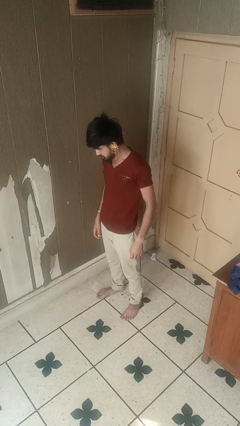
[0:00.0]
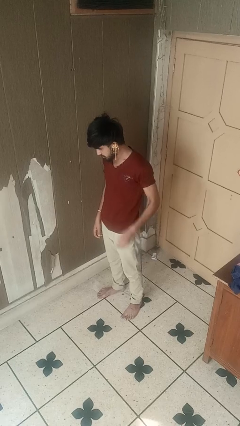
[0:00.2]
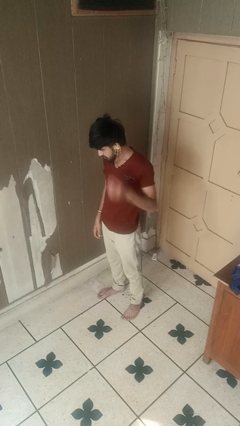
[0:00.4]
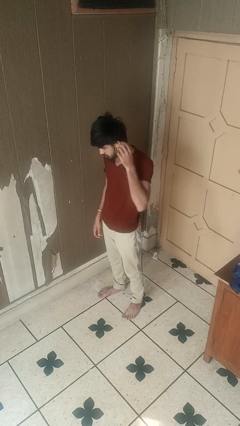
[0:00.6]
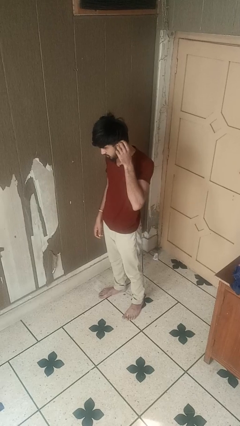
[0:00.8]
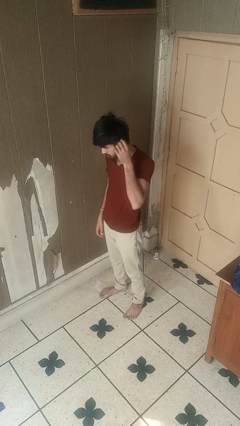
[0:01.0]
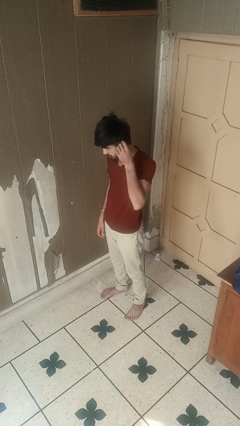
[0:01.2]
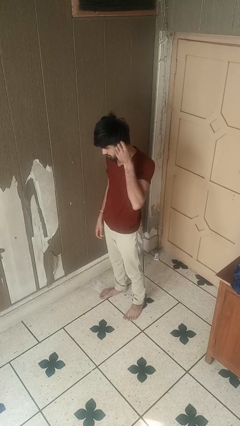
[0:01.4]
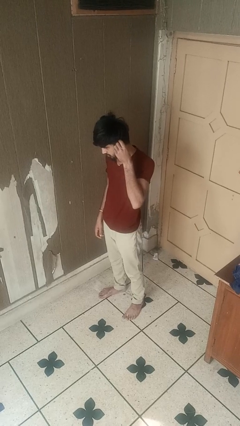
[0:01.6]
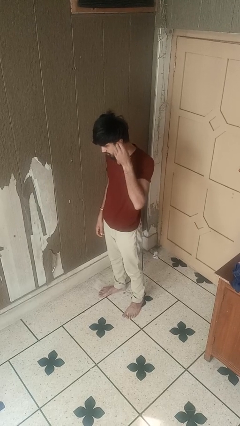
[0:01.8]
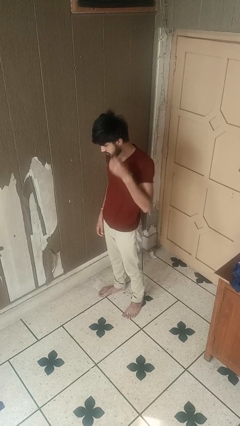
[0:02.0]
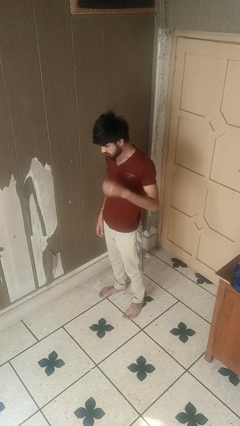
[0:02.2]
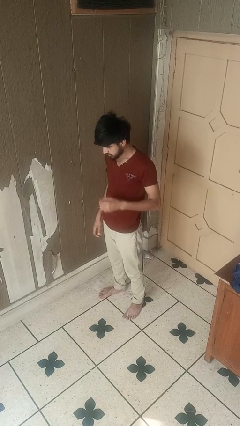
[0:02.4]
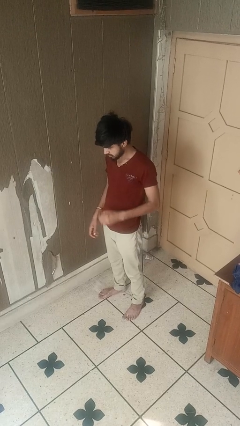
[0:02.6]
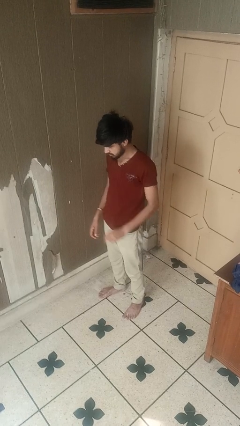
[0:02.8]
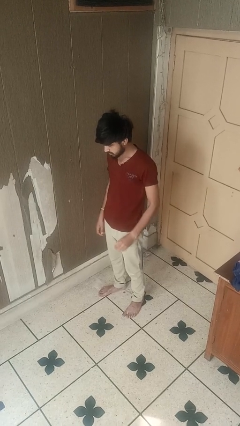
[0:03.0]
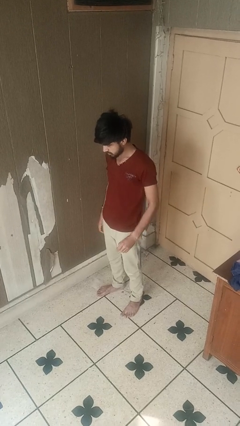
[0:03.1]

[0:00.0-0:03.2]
person takes off earrings

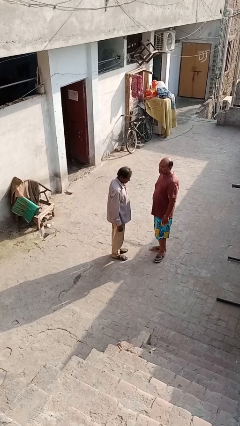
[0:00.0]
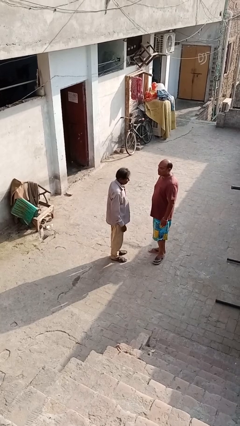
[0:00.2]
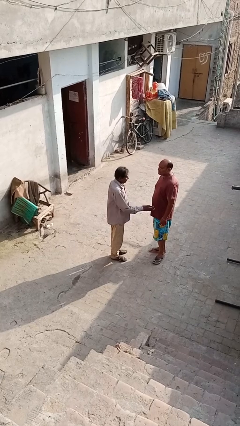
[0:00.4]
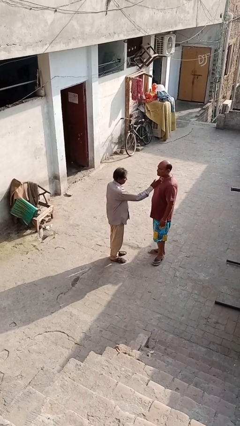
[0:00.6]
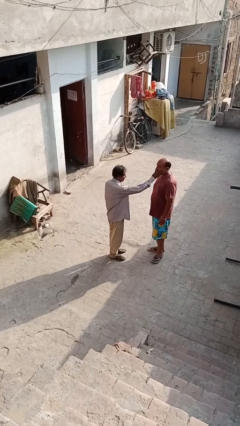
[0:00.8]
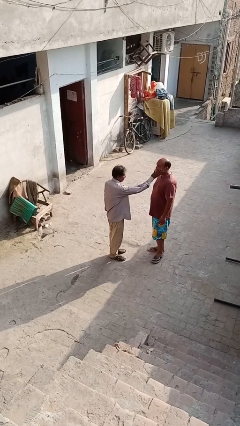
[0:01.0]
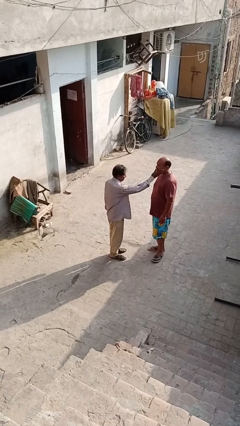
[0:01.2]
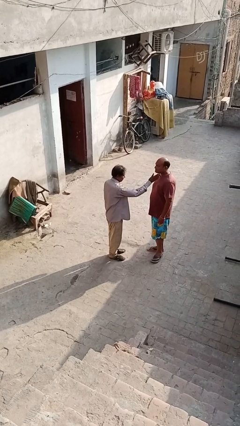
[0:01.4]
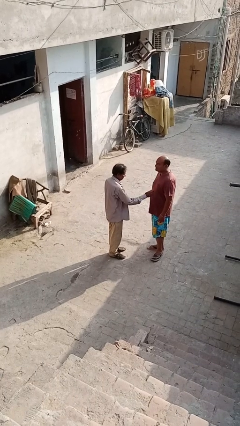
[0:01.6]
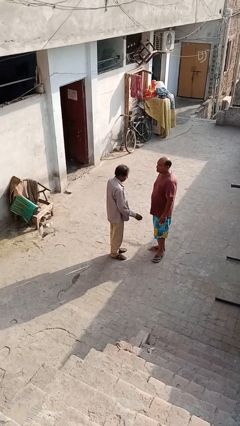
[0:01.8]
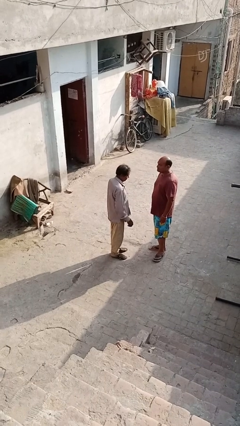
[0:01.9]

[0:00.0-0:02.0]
person touches face of person

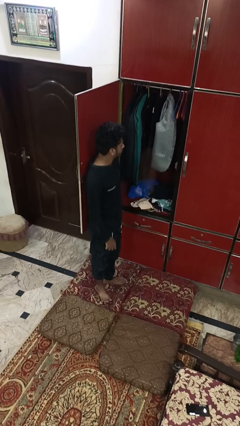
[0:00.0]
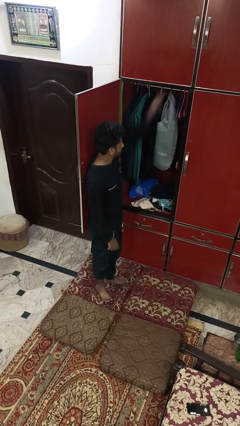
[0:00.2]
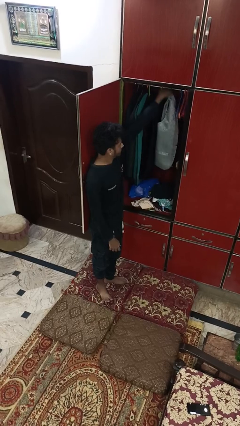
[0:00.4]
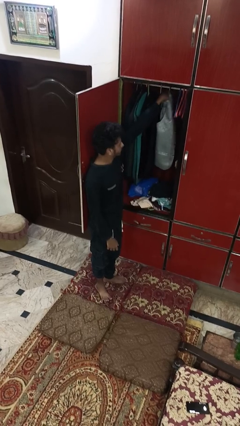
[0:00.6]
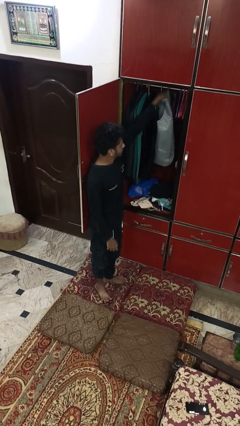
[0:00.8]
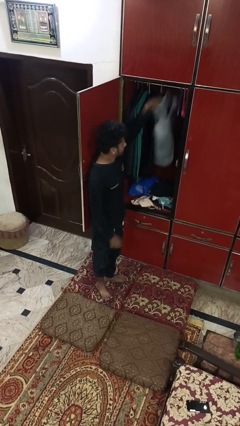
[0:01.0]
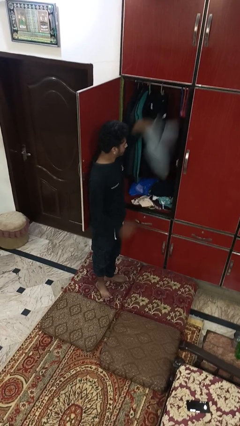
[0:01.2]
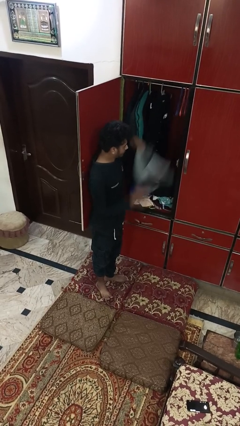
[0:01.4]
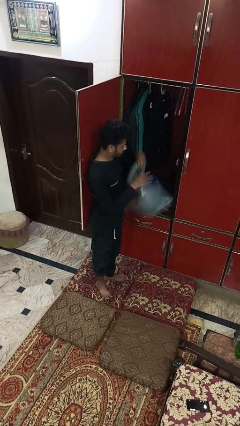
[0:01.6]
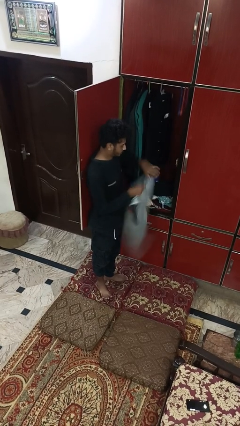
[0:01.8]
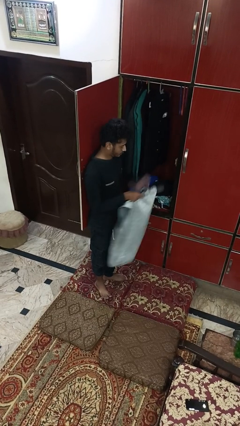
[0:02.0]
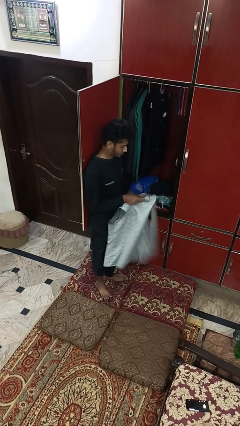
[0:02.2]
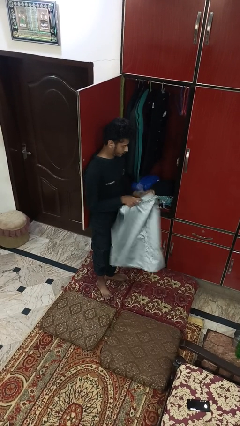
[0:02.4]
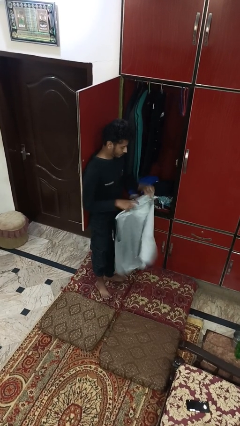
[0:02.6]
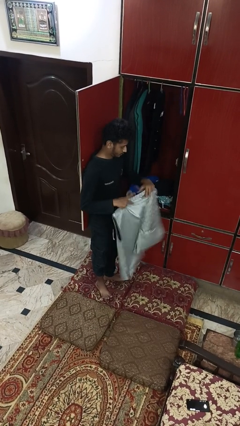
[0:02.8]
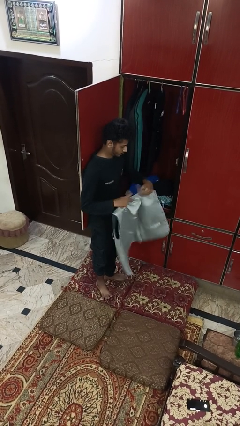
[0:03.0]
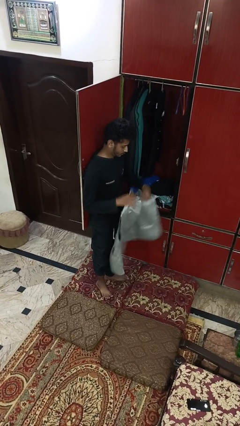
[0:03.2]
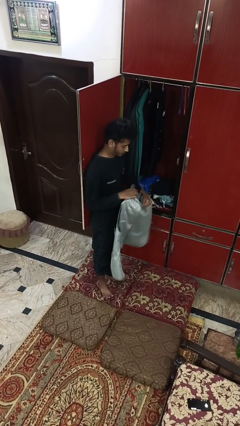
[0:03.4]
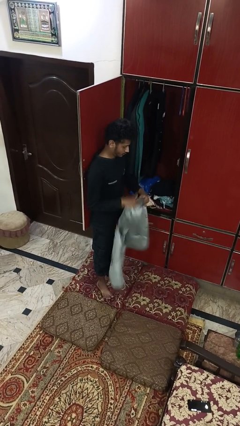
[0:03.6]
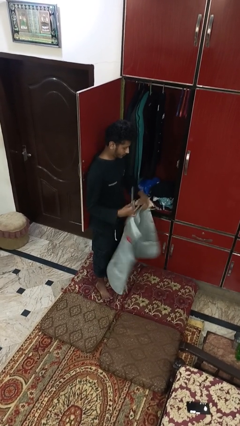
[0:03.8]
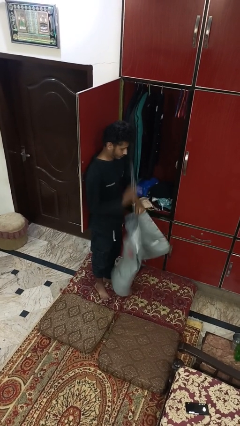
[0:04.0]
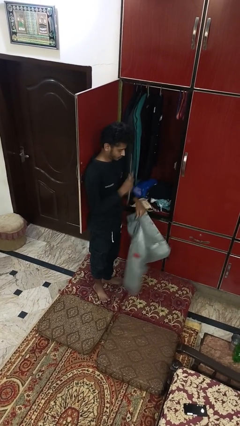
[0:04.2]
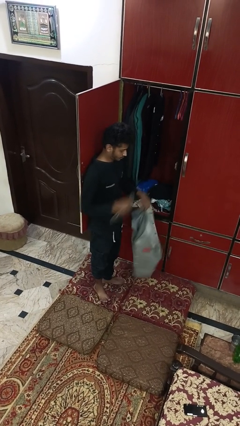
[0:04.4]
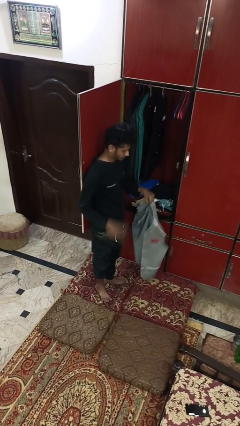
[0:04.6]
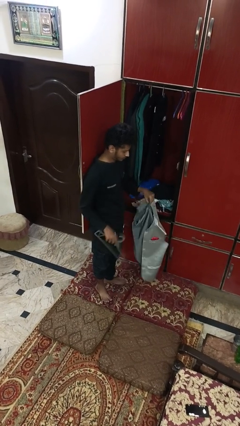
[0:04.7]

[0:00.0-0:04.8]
person takes clothes from closet

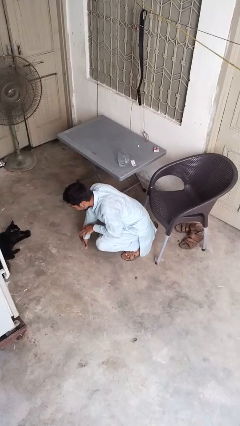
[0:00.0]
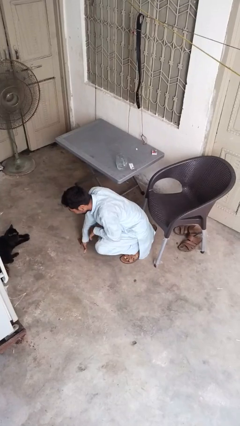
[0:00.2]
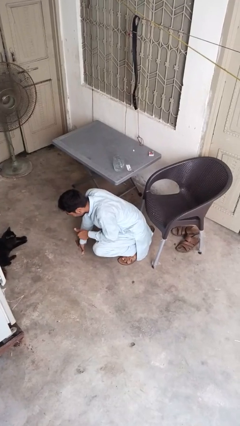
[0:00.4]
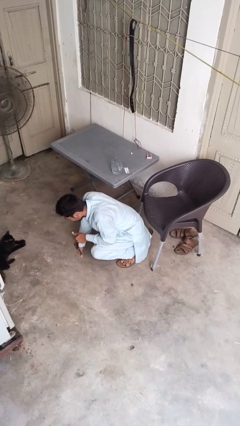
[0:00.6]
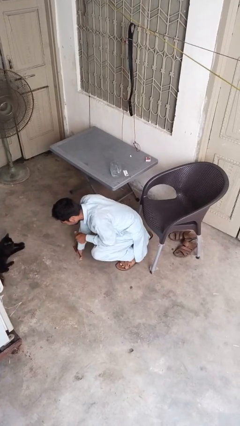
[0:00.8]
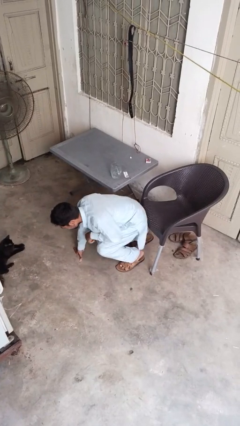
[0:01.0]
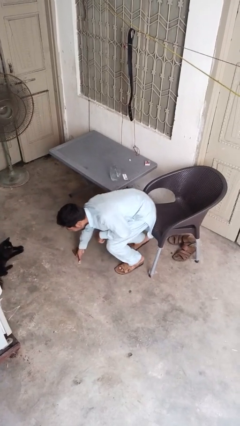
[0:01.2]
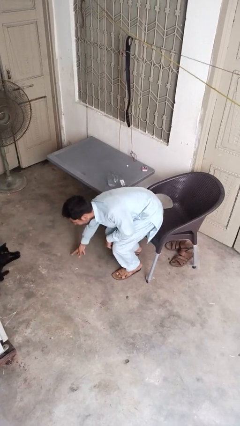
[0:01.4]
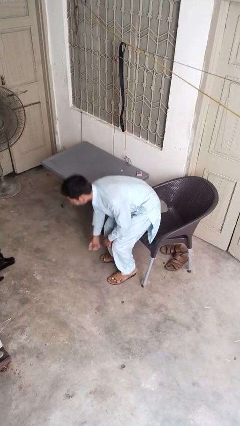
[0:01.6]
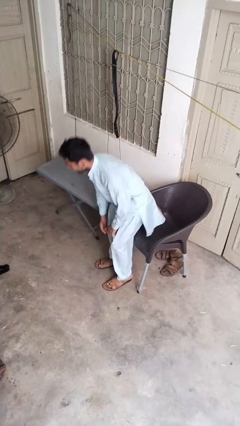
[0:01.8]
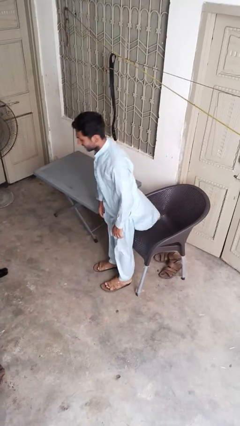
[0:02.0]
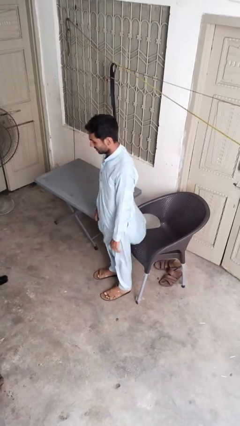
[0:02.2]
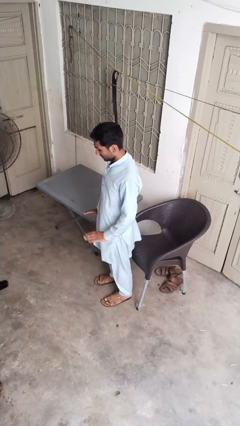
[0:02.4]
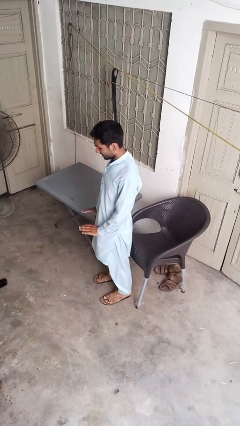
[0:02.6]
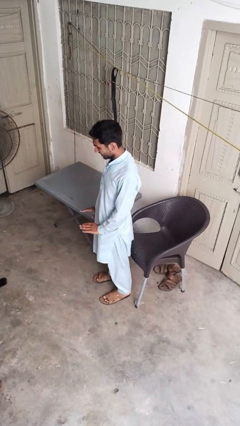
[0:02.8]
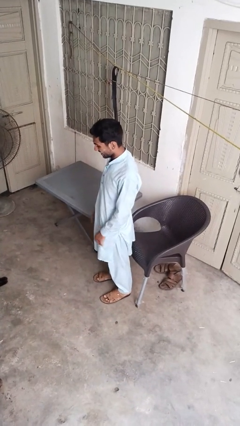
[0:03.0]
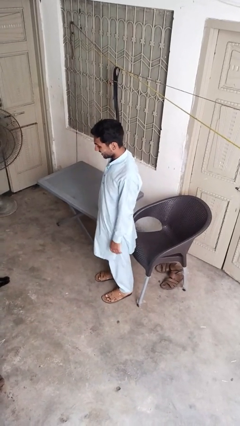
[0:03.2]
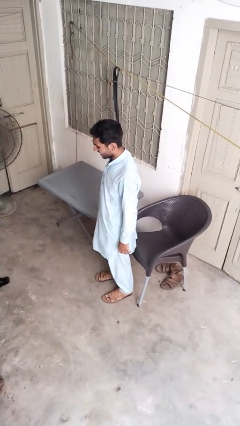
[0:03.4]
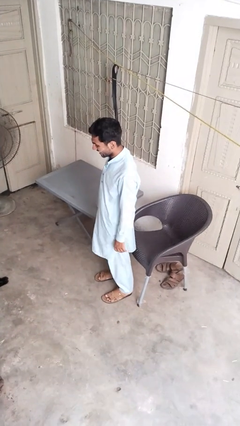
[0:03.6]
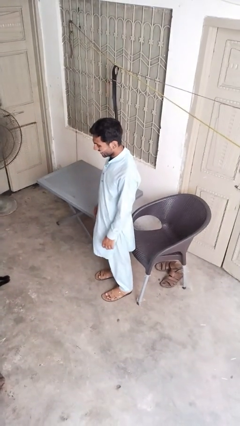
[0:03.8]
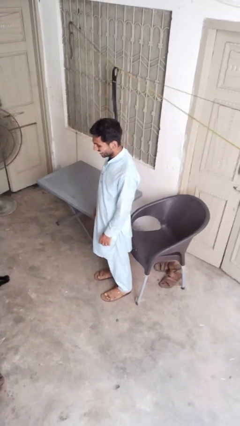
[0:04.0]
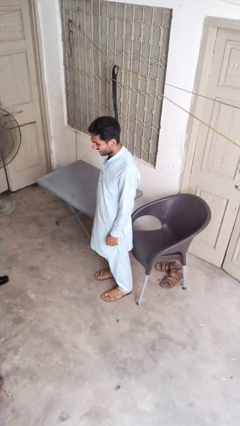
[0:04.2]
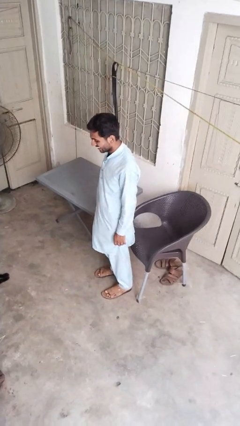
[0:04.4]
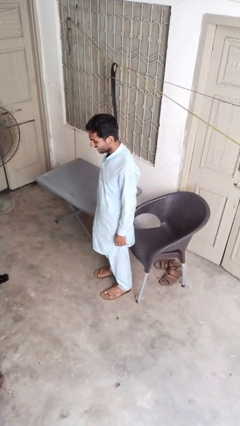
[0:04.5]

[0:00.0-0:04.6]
person stands up from floor

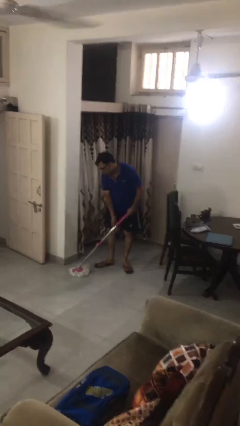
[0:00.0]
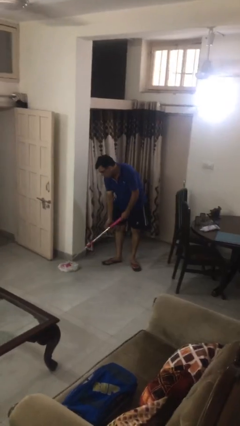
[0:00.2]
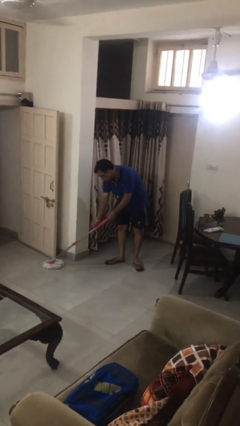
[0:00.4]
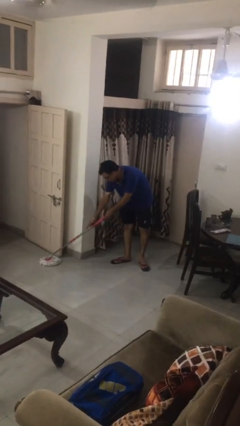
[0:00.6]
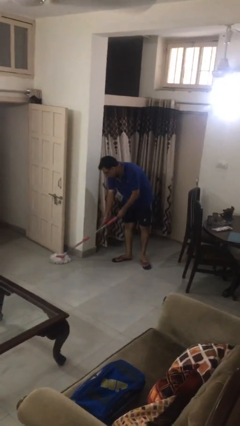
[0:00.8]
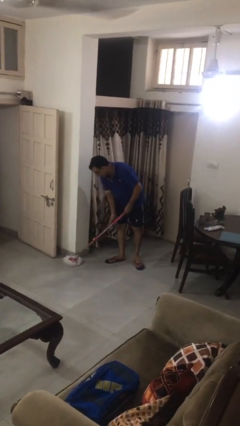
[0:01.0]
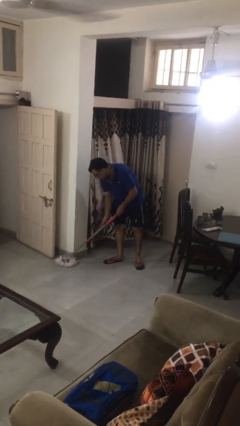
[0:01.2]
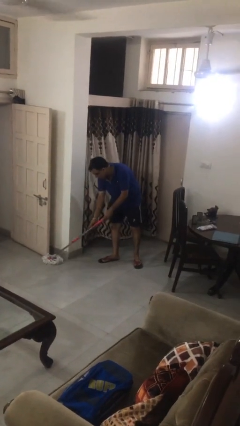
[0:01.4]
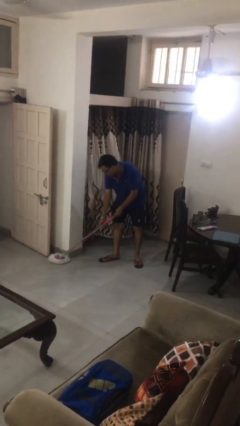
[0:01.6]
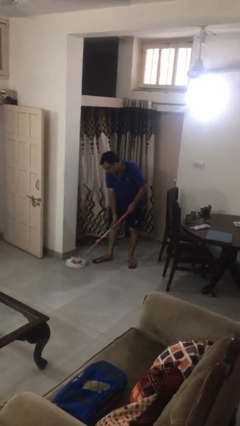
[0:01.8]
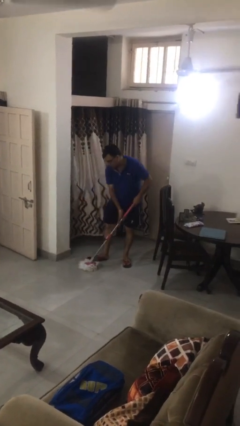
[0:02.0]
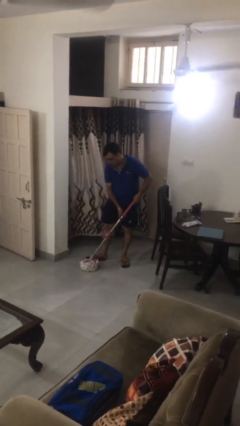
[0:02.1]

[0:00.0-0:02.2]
person mops

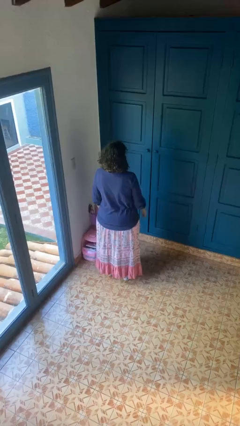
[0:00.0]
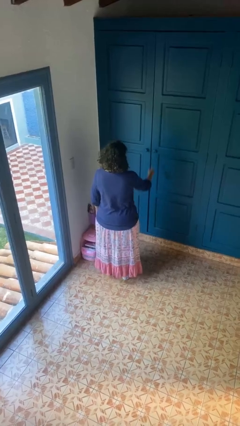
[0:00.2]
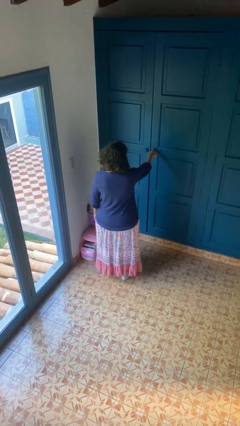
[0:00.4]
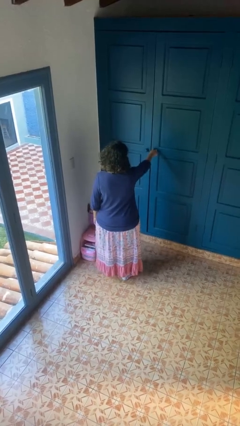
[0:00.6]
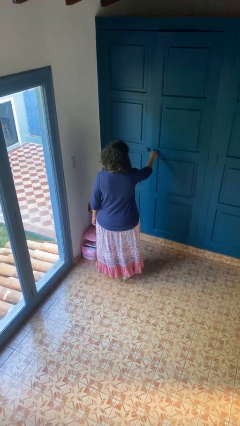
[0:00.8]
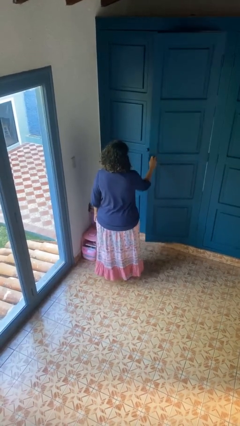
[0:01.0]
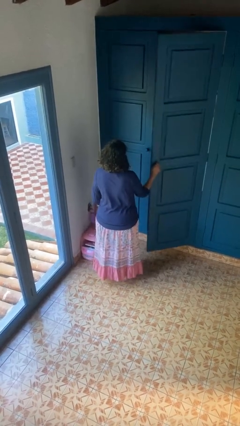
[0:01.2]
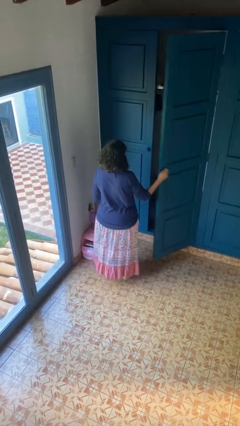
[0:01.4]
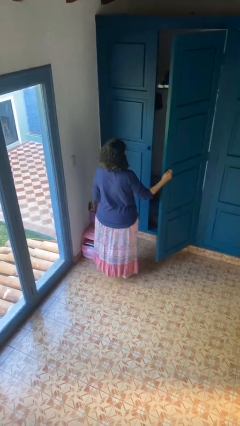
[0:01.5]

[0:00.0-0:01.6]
person opens closet door
